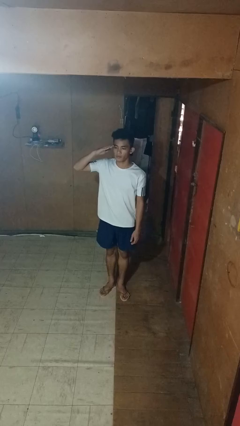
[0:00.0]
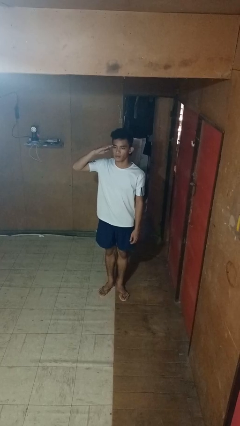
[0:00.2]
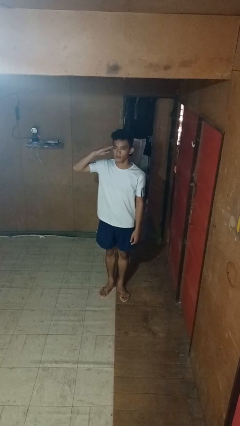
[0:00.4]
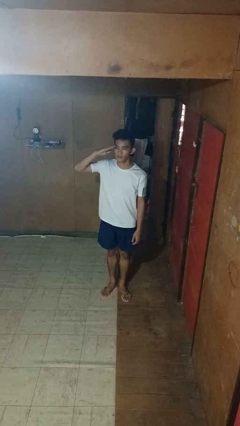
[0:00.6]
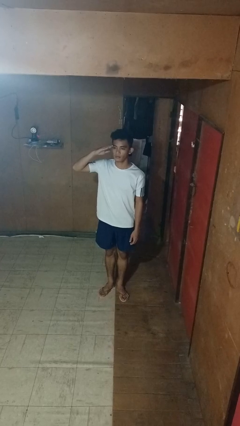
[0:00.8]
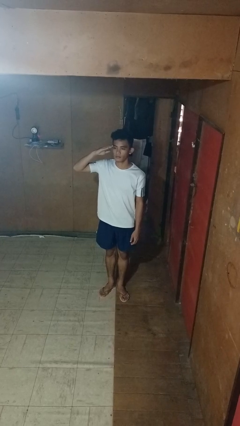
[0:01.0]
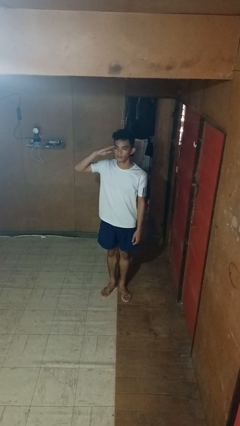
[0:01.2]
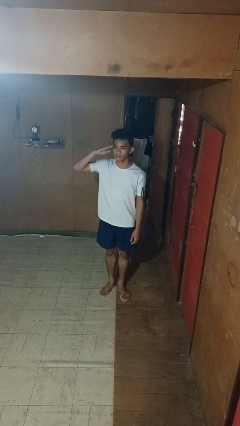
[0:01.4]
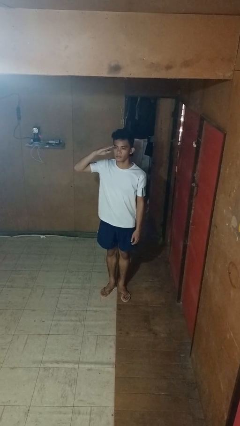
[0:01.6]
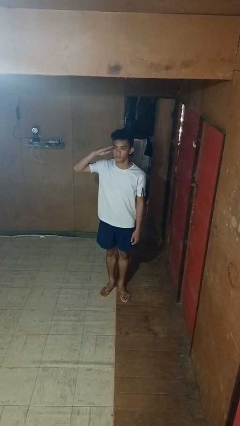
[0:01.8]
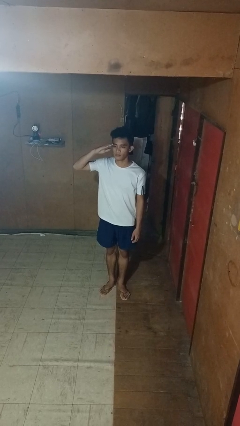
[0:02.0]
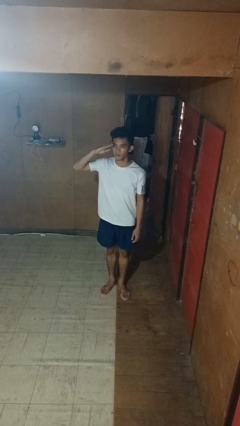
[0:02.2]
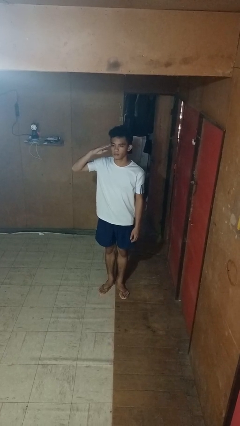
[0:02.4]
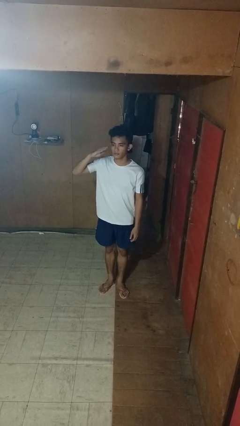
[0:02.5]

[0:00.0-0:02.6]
person salutes

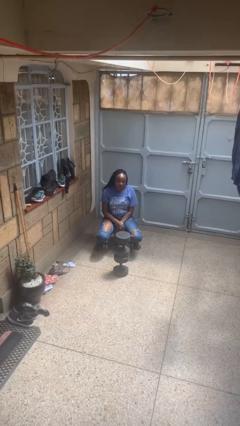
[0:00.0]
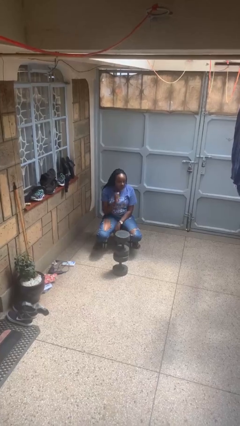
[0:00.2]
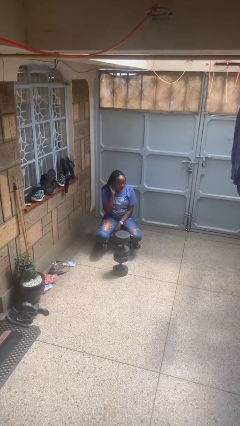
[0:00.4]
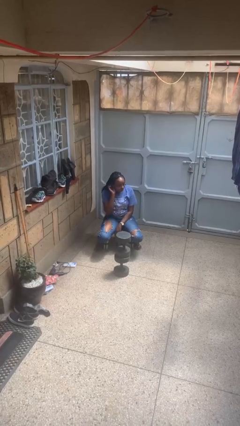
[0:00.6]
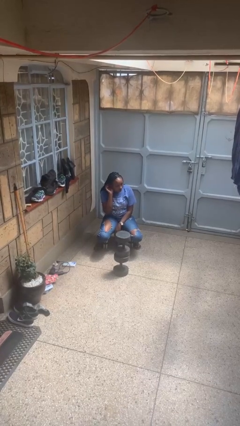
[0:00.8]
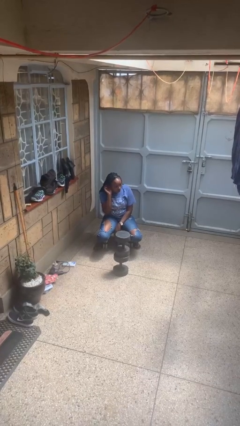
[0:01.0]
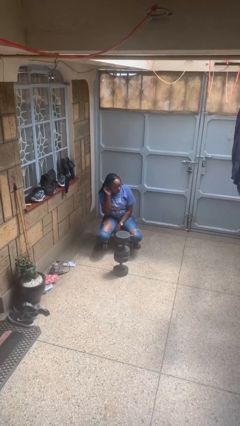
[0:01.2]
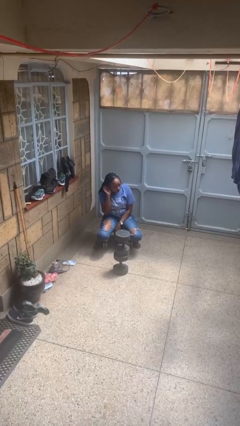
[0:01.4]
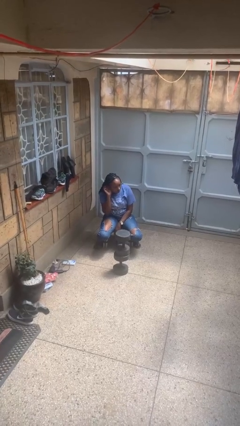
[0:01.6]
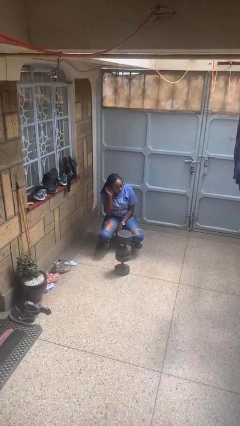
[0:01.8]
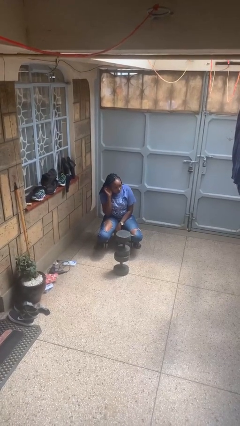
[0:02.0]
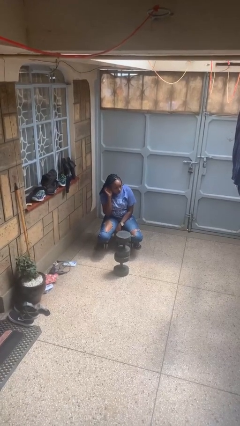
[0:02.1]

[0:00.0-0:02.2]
person gestures listen closely

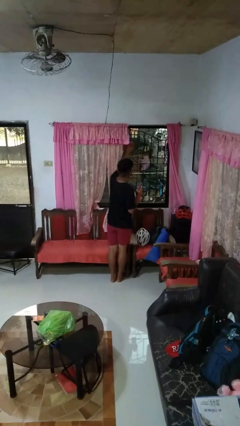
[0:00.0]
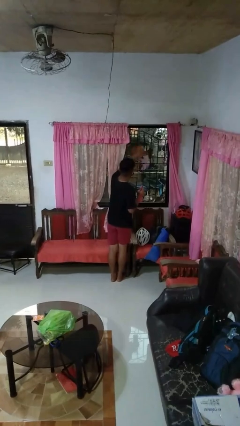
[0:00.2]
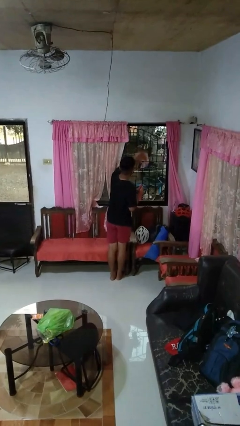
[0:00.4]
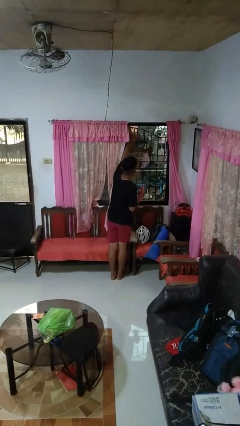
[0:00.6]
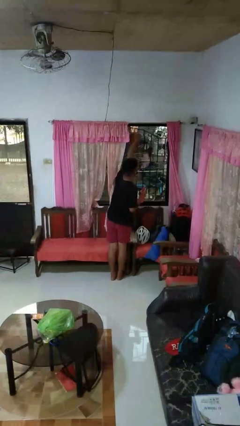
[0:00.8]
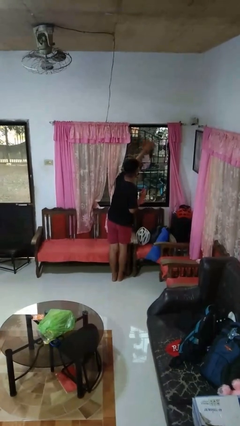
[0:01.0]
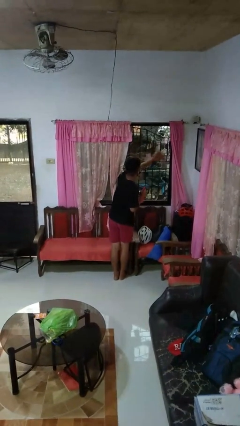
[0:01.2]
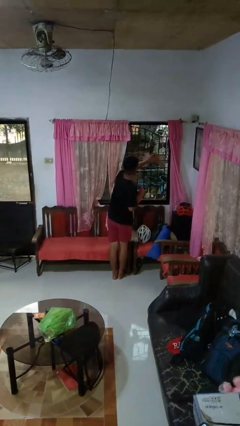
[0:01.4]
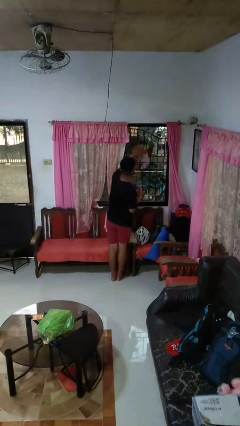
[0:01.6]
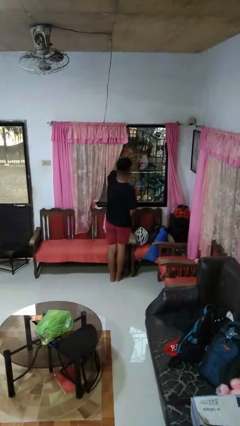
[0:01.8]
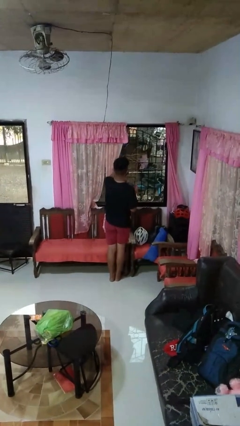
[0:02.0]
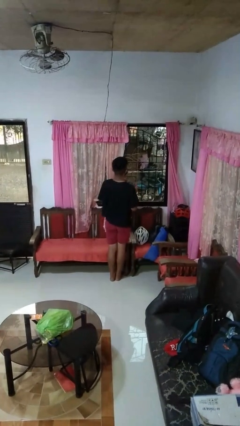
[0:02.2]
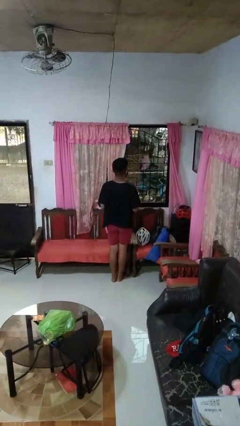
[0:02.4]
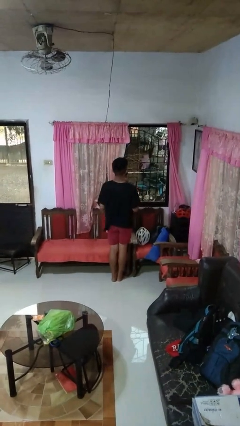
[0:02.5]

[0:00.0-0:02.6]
person washes window

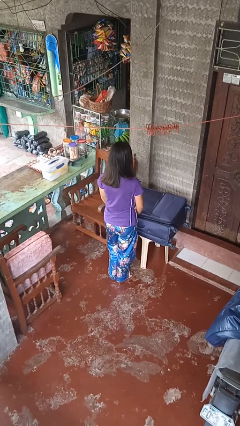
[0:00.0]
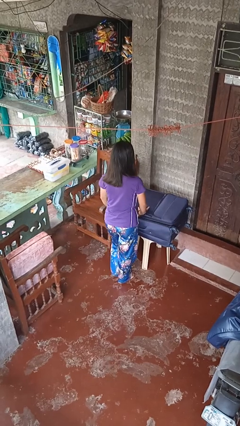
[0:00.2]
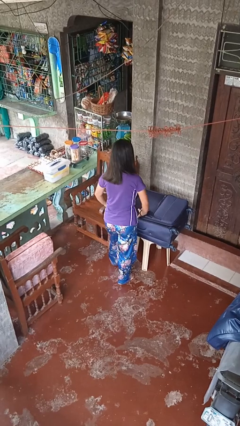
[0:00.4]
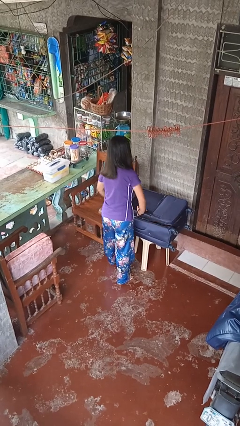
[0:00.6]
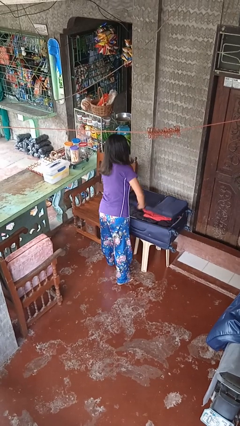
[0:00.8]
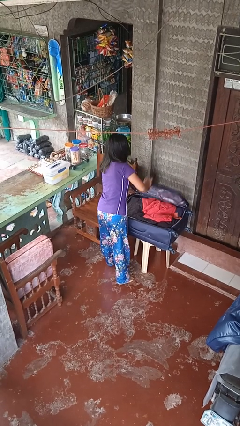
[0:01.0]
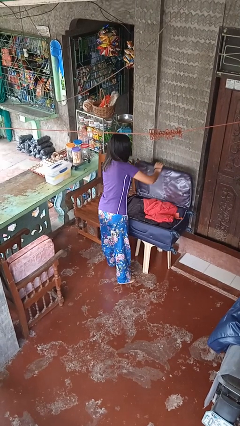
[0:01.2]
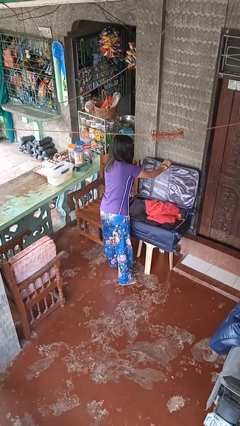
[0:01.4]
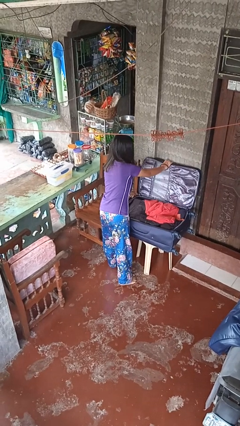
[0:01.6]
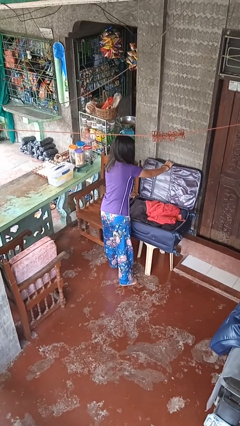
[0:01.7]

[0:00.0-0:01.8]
person opens suitcase

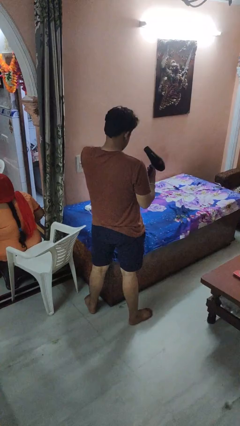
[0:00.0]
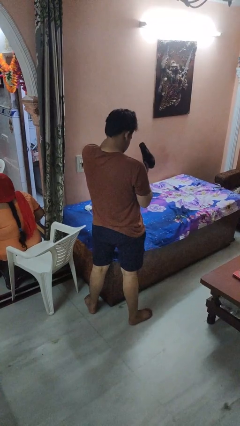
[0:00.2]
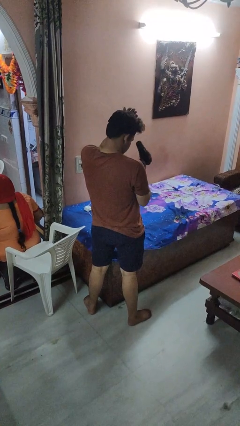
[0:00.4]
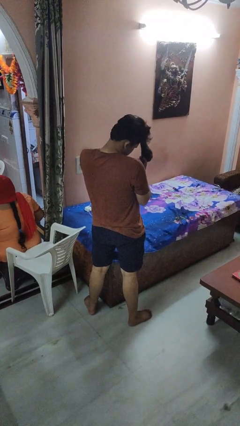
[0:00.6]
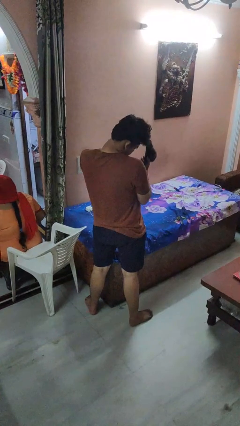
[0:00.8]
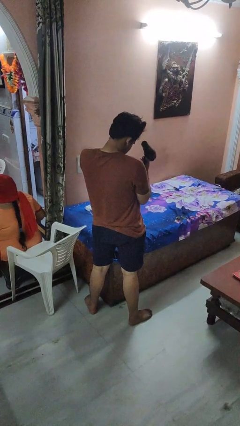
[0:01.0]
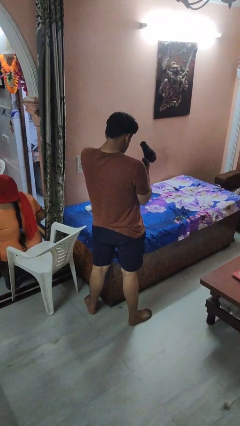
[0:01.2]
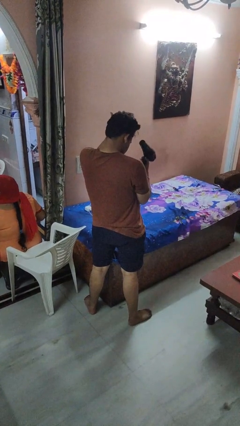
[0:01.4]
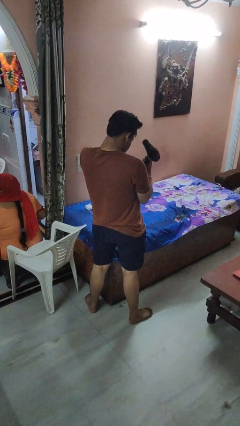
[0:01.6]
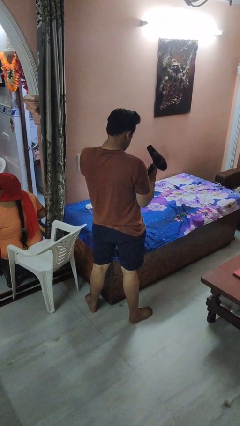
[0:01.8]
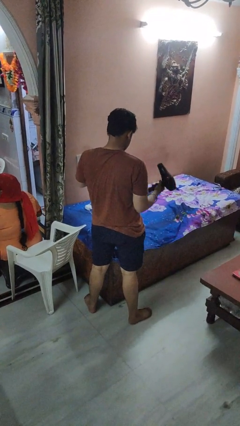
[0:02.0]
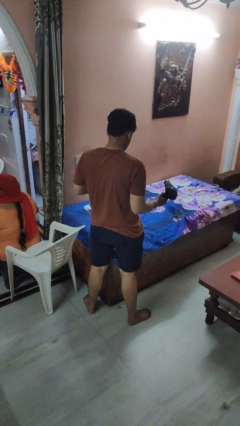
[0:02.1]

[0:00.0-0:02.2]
person dries hair with hairdryer

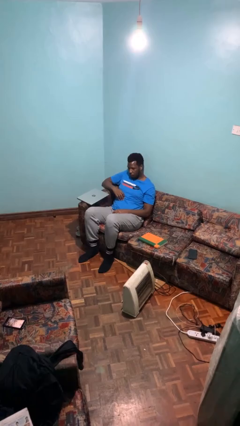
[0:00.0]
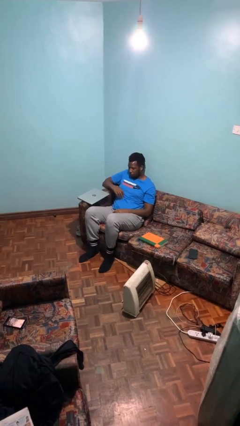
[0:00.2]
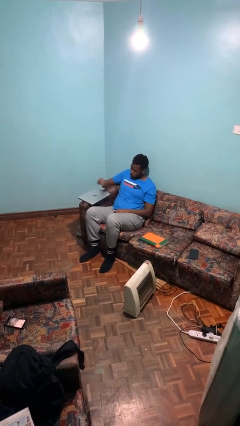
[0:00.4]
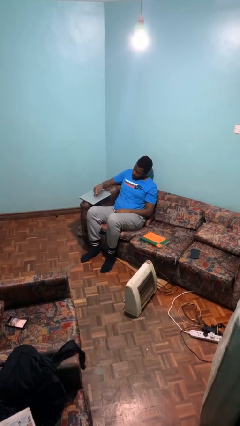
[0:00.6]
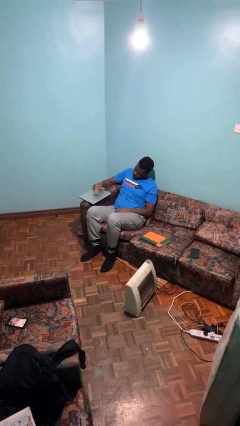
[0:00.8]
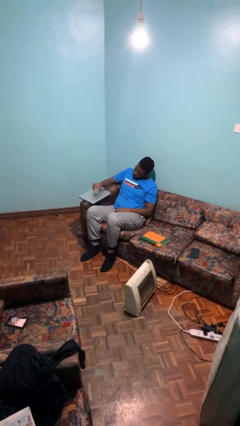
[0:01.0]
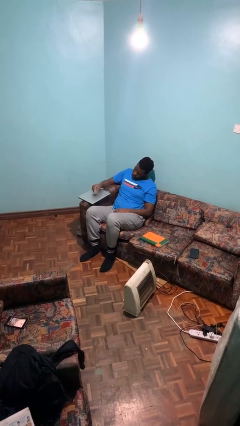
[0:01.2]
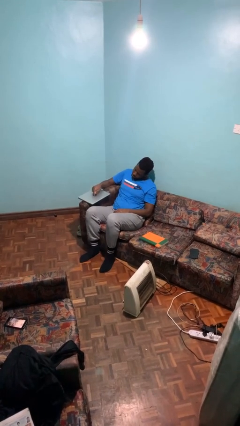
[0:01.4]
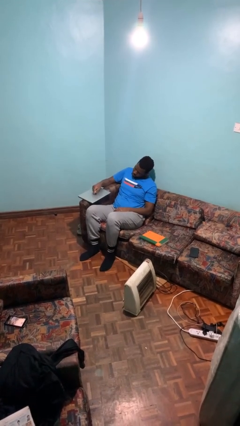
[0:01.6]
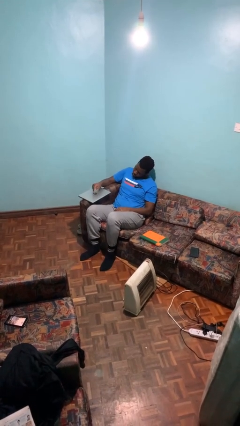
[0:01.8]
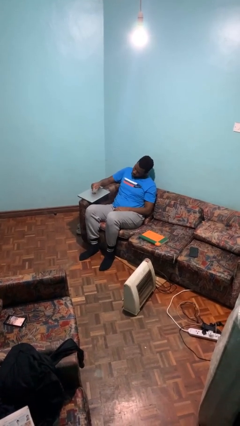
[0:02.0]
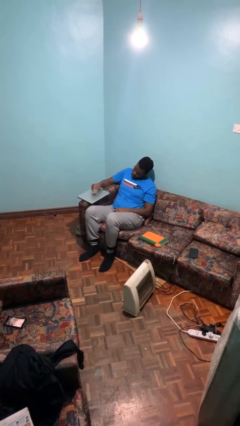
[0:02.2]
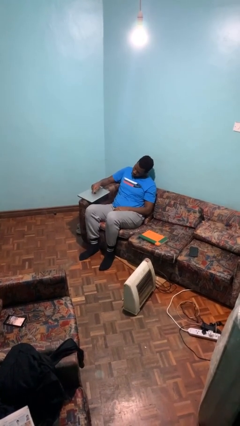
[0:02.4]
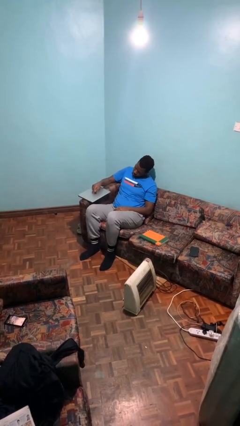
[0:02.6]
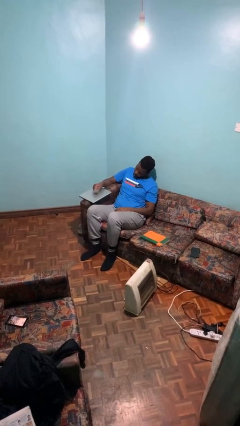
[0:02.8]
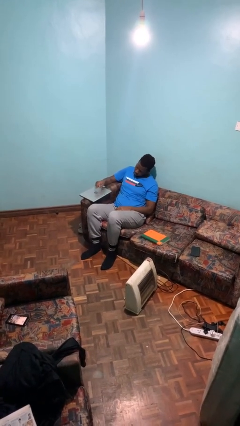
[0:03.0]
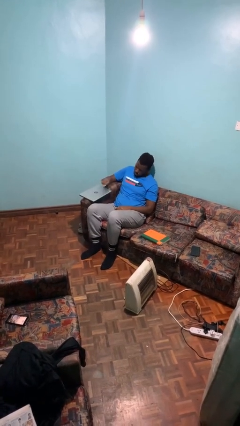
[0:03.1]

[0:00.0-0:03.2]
person taps object with finger

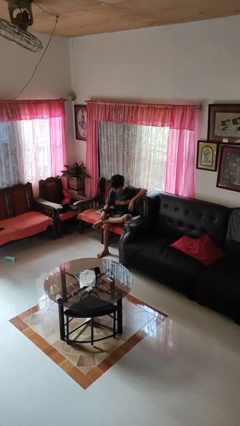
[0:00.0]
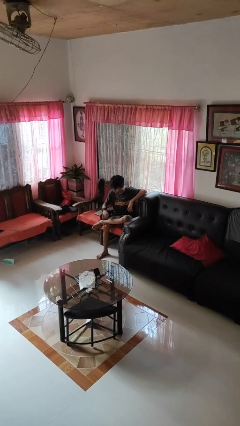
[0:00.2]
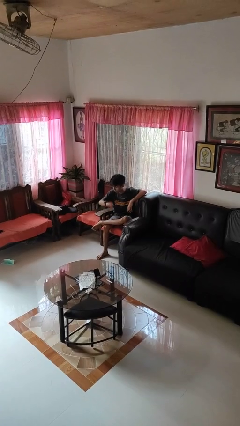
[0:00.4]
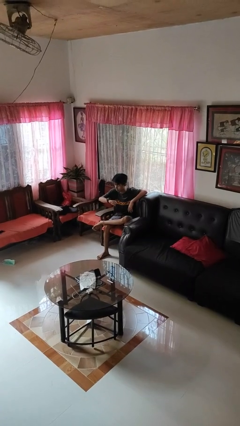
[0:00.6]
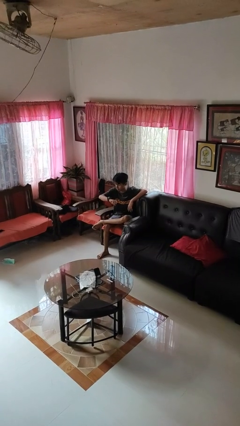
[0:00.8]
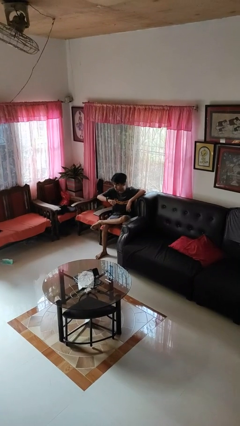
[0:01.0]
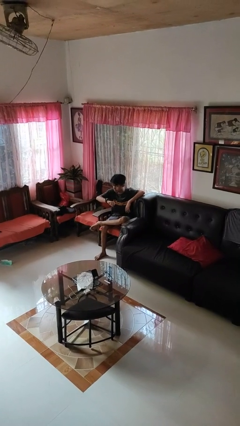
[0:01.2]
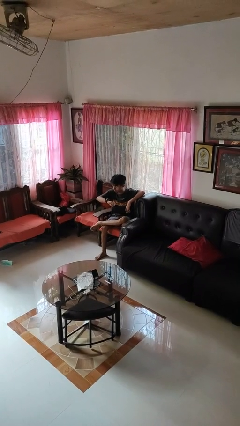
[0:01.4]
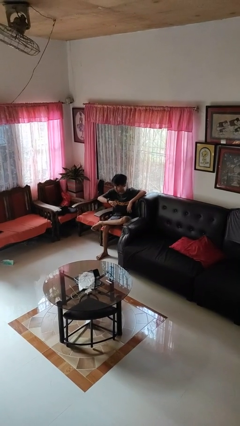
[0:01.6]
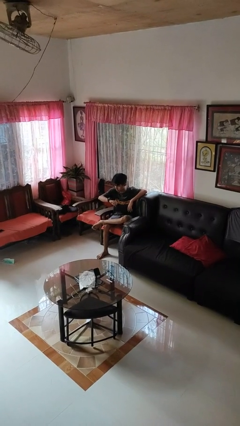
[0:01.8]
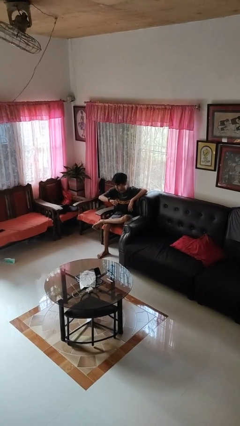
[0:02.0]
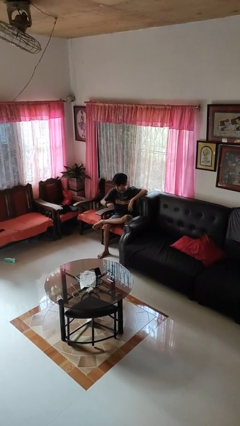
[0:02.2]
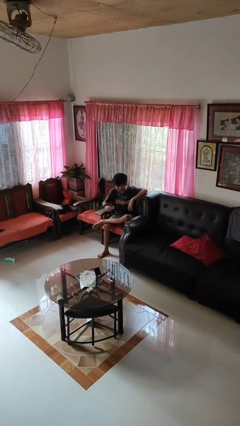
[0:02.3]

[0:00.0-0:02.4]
person looks at wristwatch
